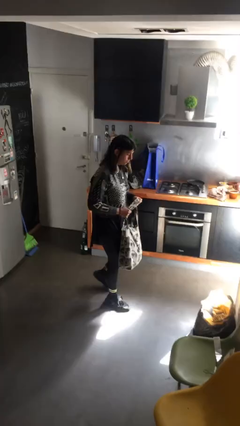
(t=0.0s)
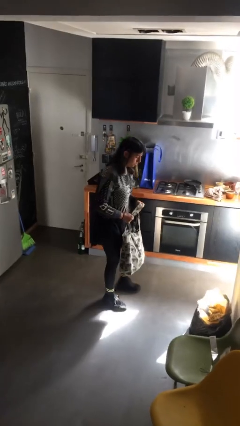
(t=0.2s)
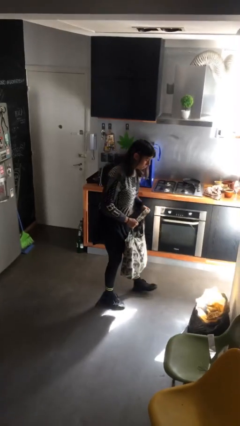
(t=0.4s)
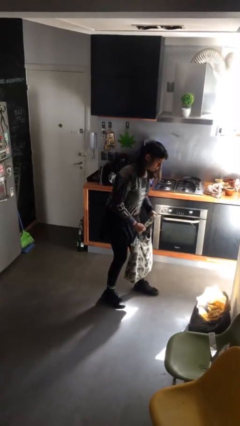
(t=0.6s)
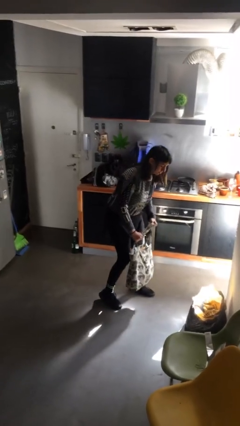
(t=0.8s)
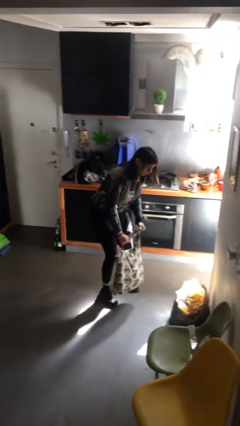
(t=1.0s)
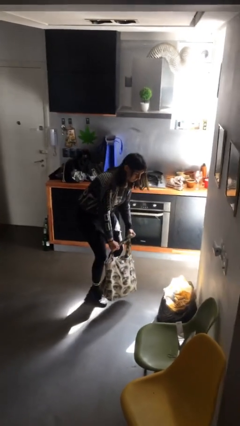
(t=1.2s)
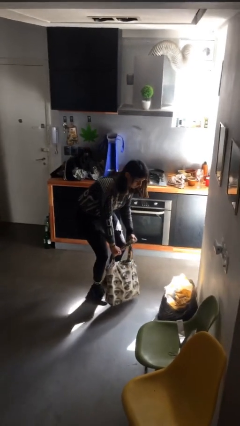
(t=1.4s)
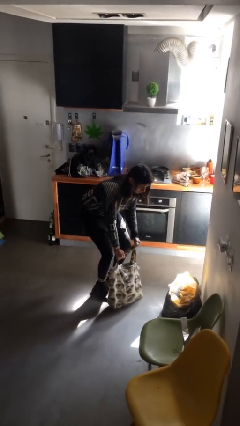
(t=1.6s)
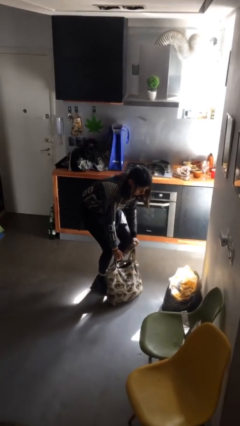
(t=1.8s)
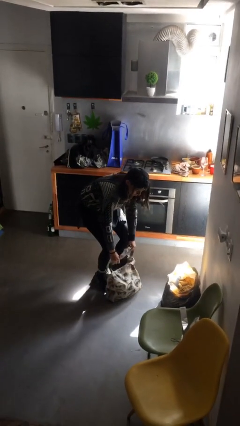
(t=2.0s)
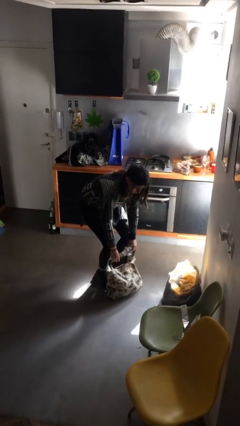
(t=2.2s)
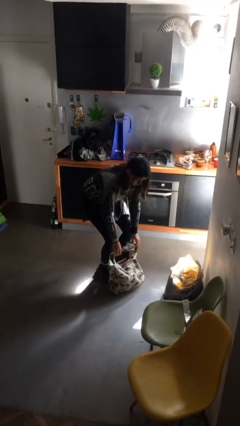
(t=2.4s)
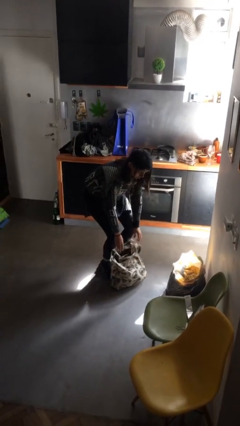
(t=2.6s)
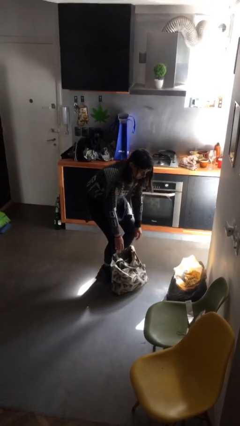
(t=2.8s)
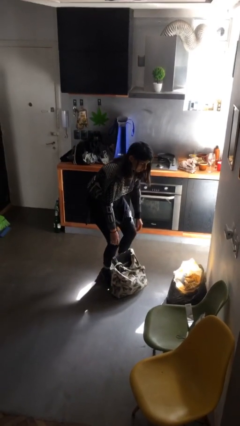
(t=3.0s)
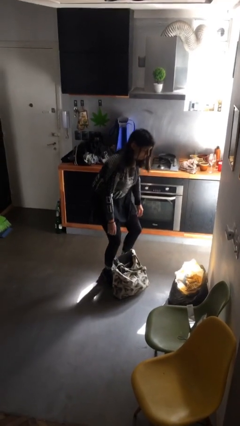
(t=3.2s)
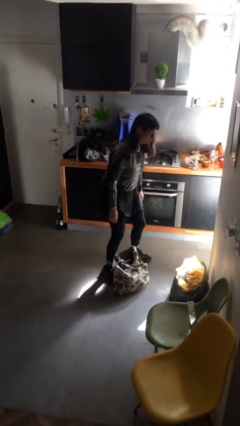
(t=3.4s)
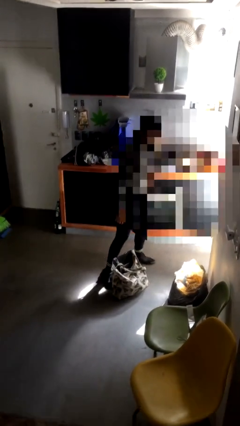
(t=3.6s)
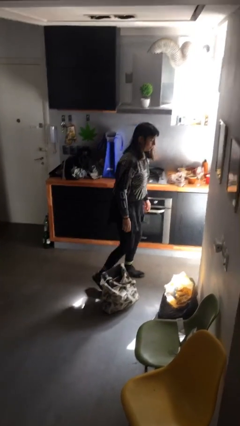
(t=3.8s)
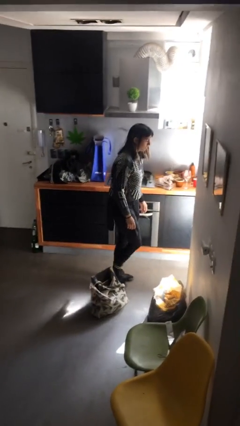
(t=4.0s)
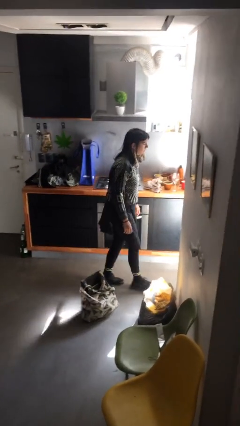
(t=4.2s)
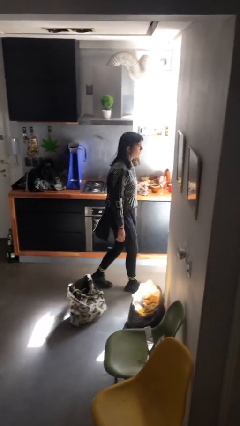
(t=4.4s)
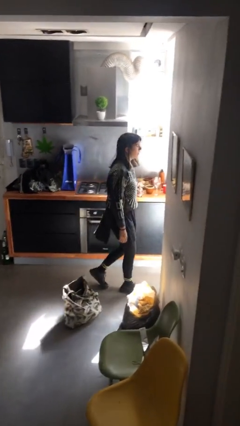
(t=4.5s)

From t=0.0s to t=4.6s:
person puts down object on floor

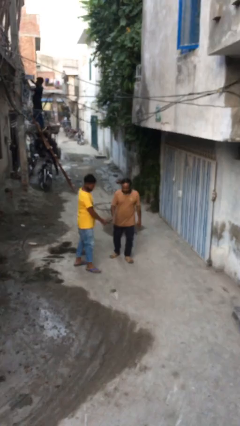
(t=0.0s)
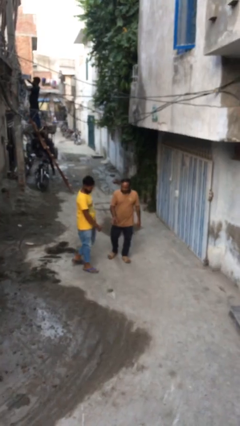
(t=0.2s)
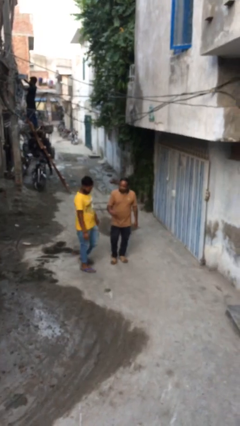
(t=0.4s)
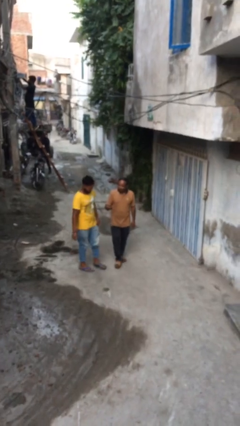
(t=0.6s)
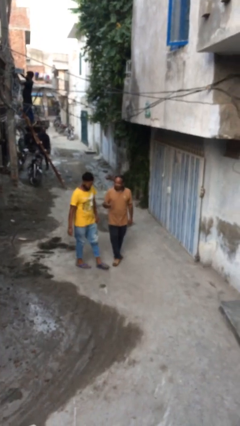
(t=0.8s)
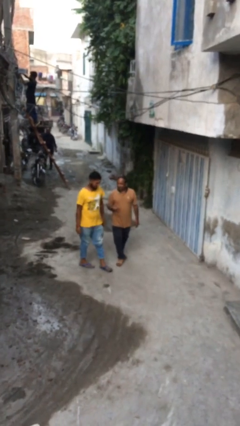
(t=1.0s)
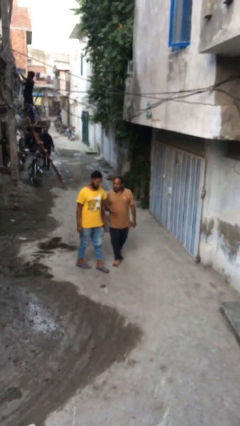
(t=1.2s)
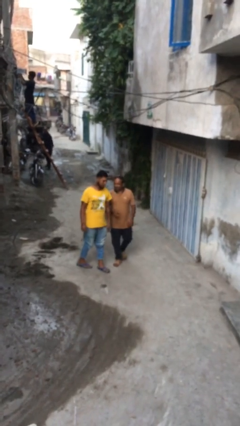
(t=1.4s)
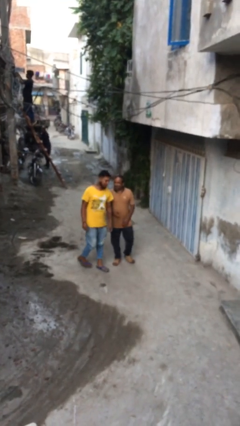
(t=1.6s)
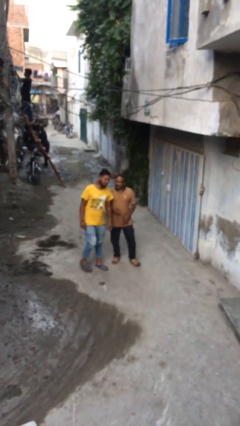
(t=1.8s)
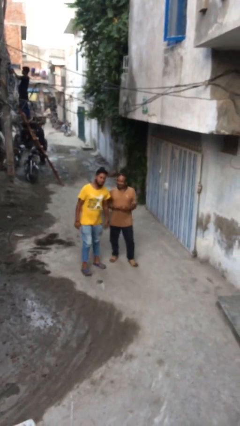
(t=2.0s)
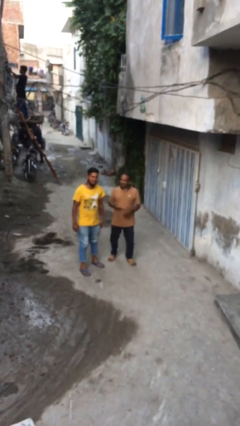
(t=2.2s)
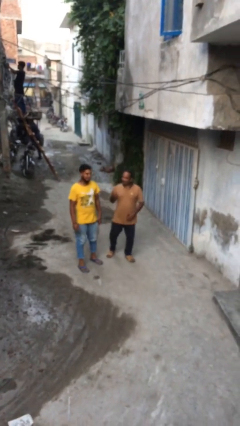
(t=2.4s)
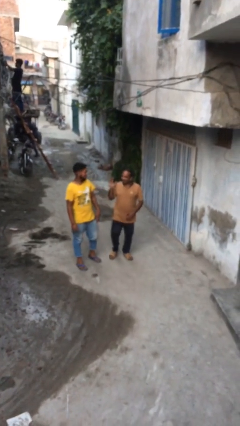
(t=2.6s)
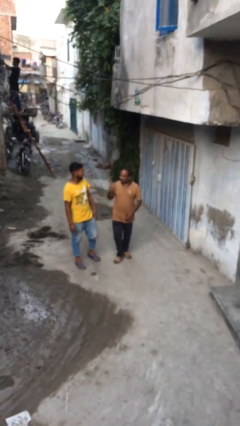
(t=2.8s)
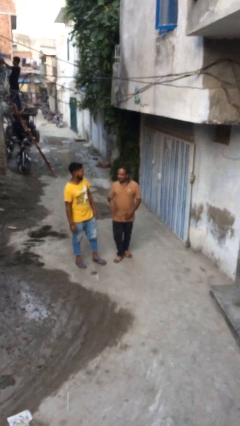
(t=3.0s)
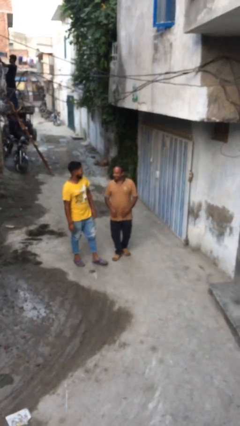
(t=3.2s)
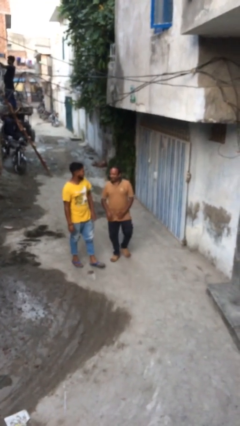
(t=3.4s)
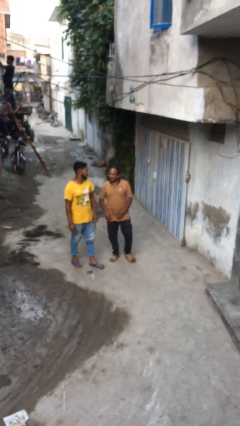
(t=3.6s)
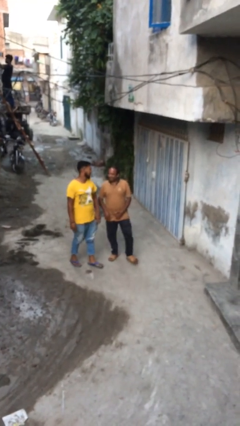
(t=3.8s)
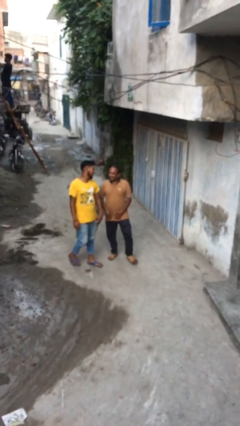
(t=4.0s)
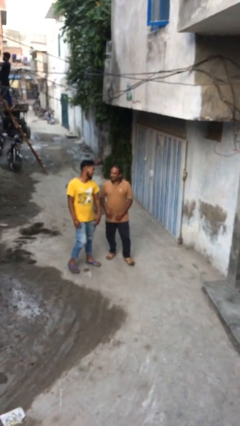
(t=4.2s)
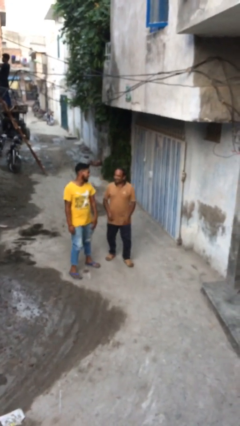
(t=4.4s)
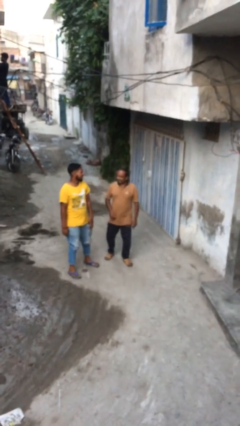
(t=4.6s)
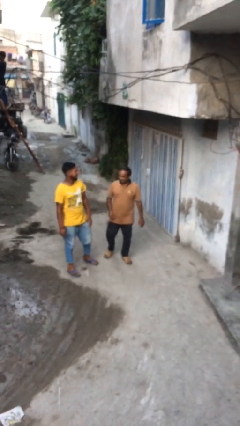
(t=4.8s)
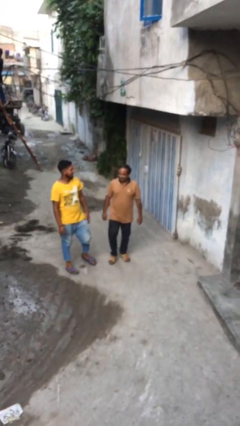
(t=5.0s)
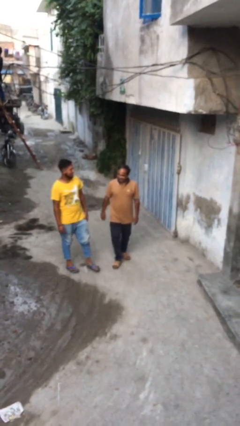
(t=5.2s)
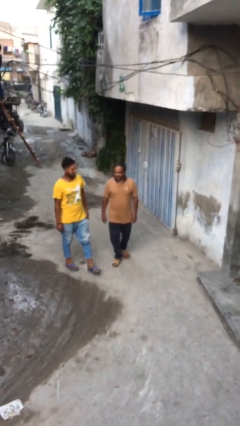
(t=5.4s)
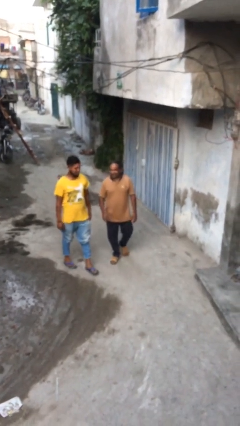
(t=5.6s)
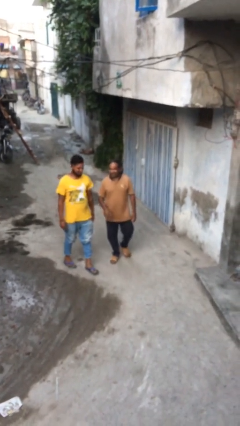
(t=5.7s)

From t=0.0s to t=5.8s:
person talks to person

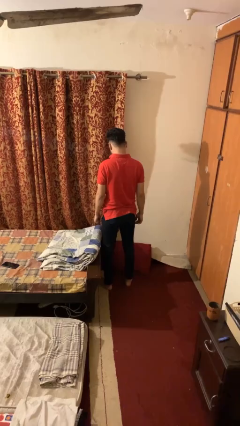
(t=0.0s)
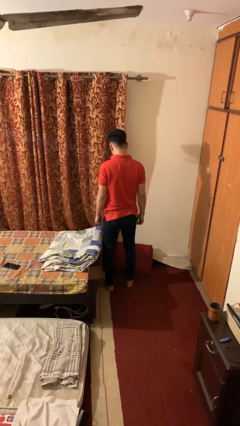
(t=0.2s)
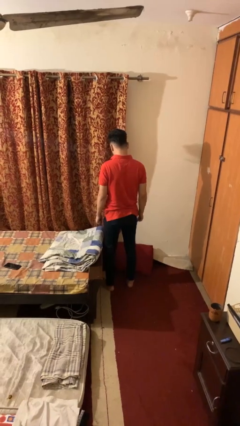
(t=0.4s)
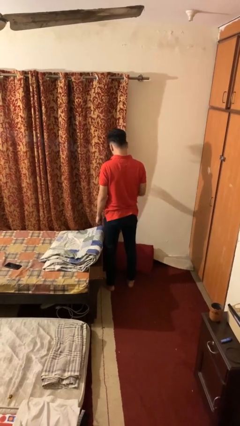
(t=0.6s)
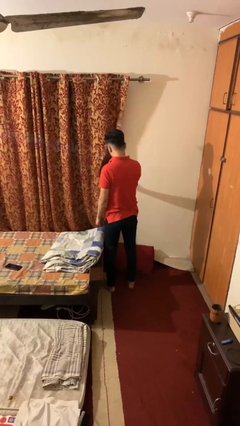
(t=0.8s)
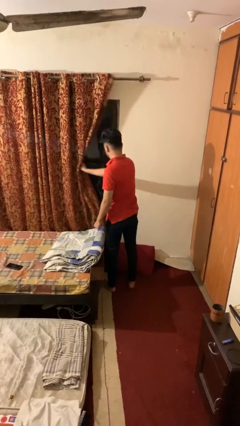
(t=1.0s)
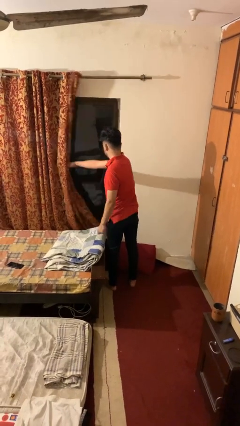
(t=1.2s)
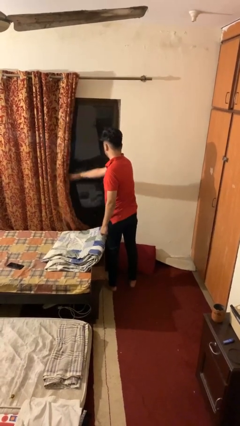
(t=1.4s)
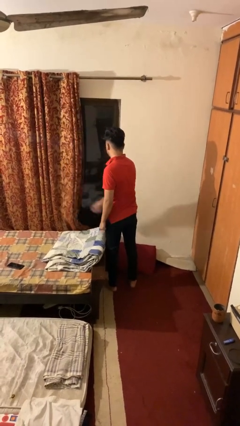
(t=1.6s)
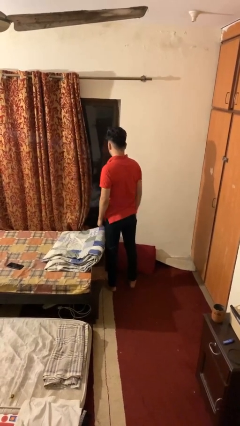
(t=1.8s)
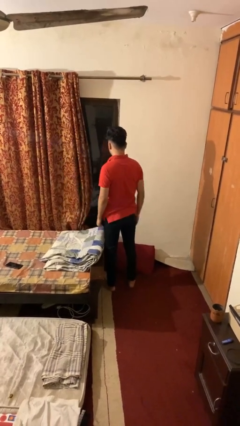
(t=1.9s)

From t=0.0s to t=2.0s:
person opens curtains

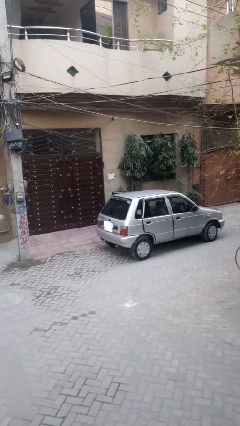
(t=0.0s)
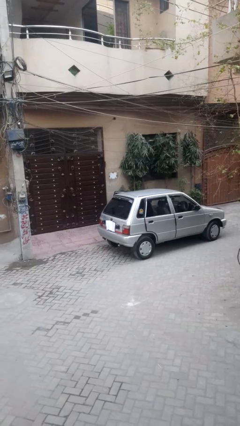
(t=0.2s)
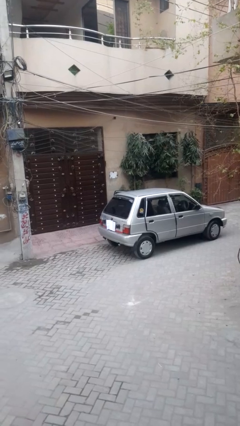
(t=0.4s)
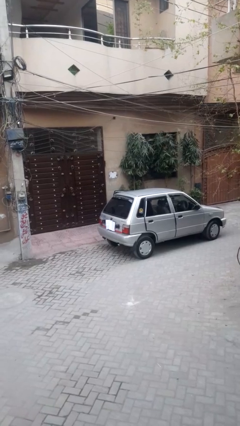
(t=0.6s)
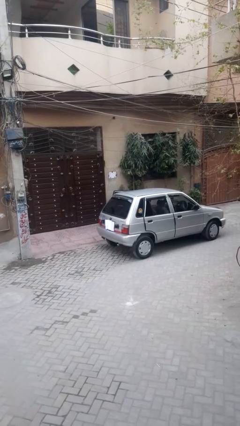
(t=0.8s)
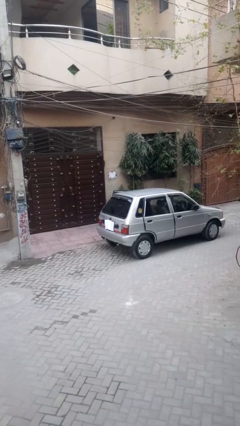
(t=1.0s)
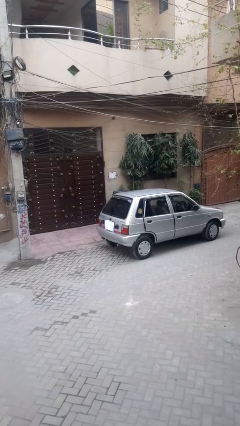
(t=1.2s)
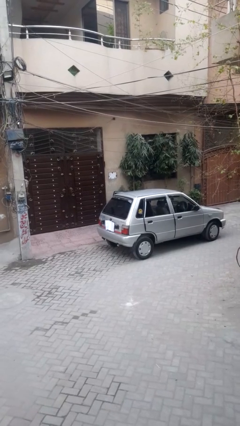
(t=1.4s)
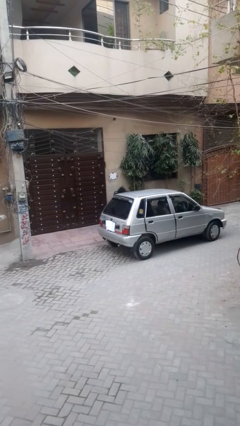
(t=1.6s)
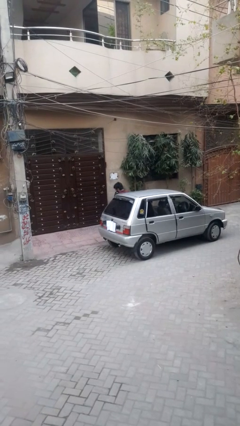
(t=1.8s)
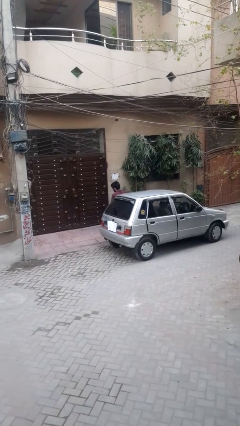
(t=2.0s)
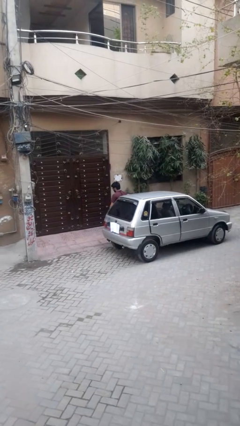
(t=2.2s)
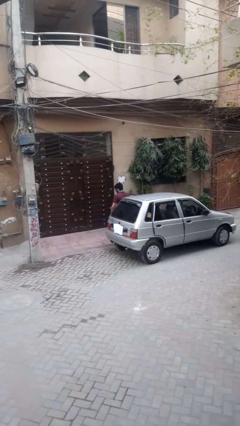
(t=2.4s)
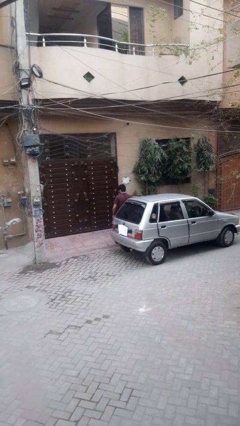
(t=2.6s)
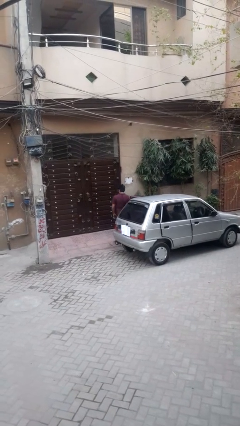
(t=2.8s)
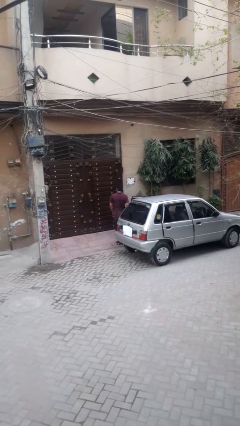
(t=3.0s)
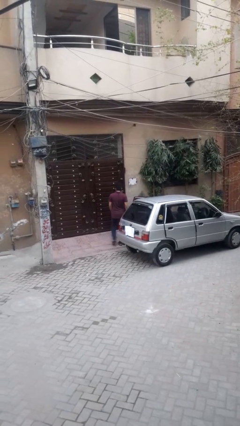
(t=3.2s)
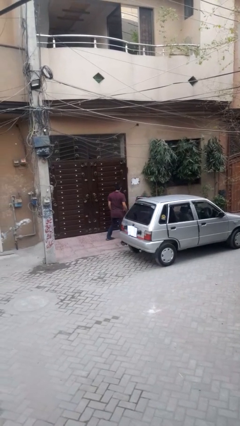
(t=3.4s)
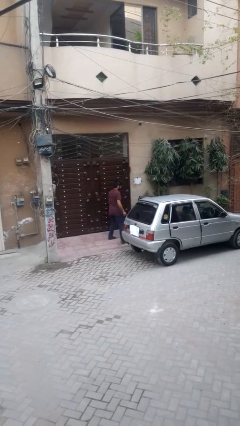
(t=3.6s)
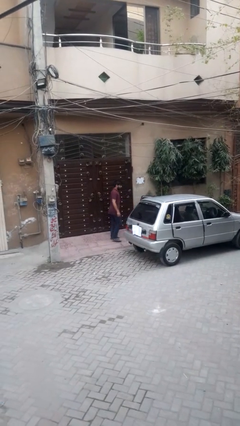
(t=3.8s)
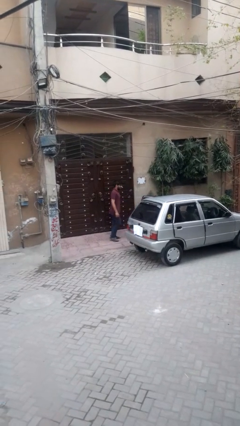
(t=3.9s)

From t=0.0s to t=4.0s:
person exits car

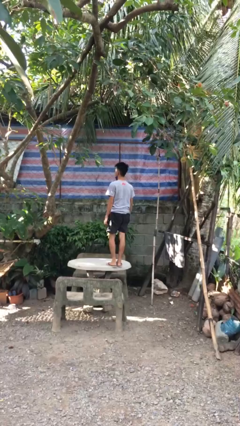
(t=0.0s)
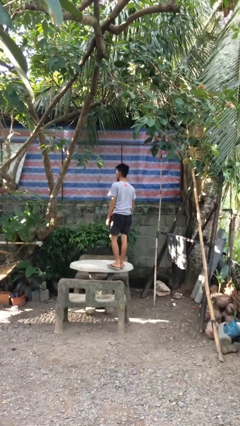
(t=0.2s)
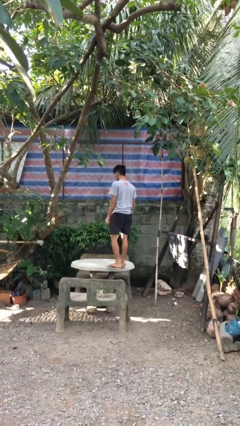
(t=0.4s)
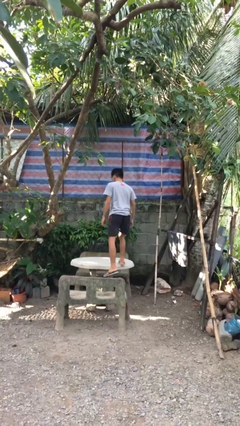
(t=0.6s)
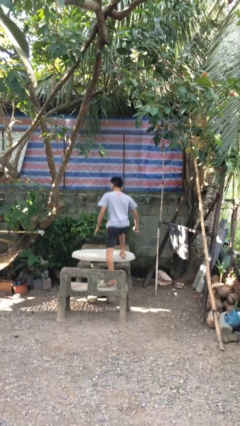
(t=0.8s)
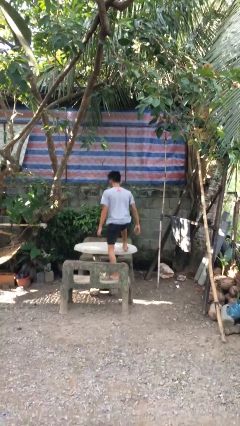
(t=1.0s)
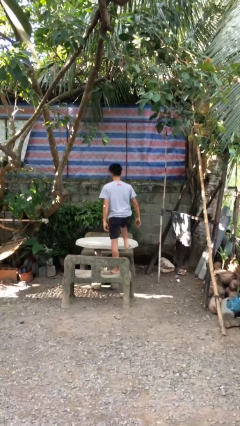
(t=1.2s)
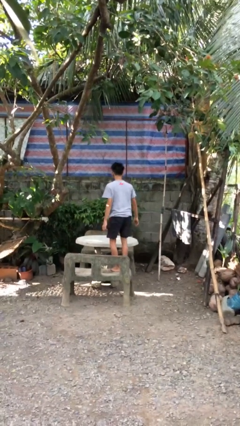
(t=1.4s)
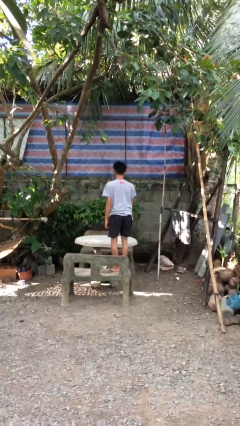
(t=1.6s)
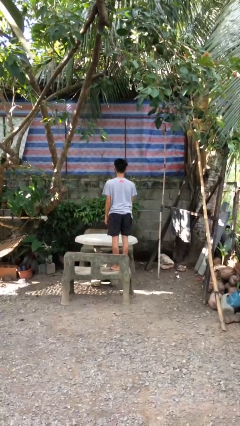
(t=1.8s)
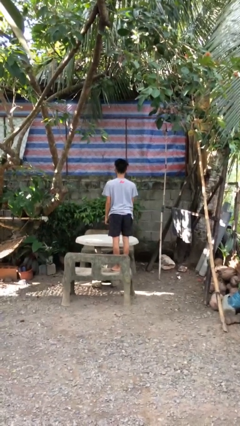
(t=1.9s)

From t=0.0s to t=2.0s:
person climbs off table
